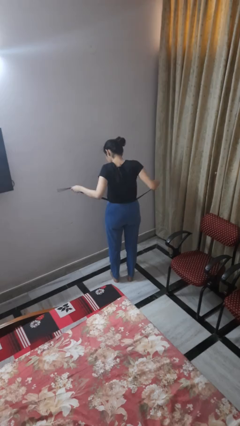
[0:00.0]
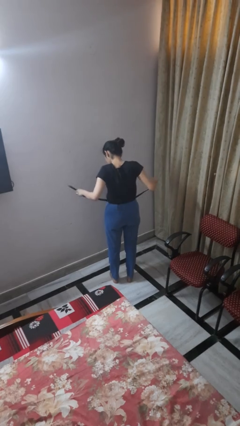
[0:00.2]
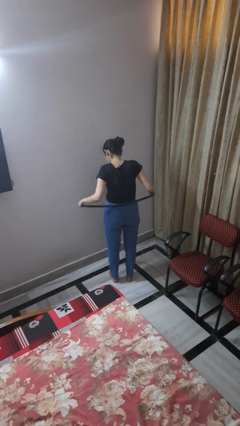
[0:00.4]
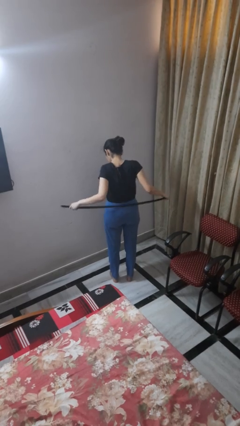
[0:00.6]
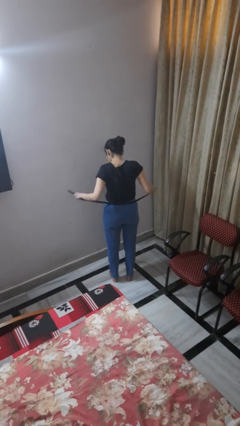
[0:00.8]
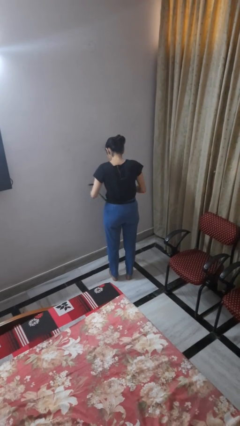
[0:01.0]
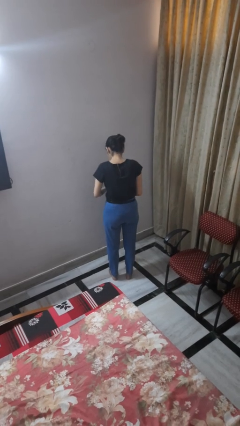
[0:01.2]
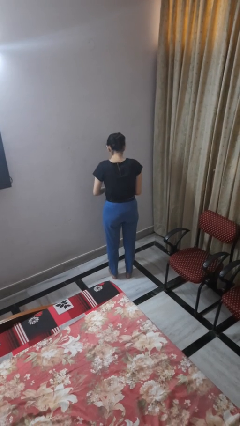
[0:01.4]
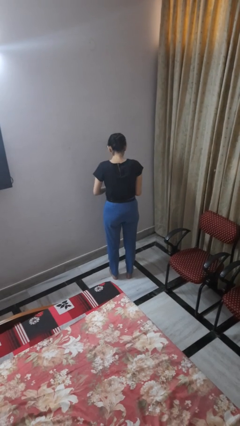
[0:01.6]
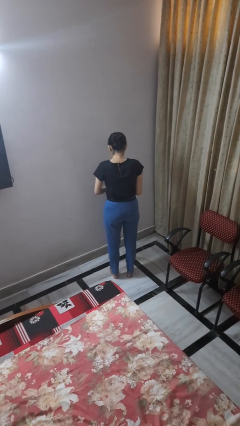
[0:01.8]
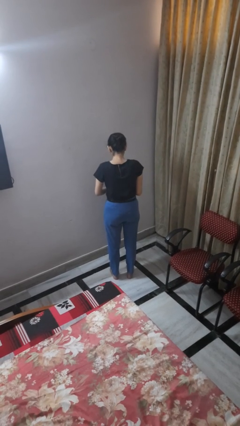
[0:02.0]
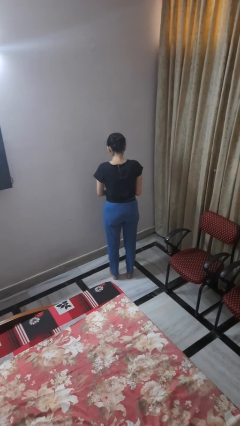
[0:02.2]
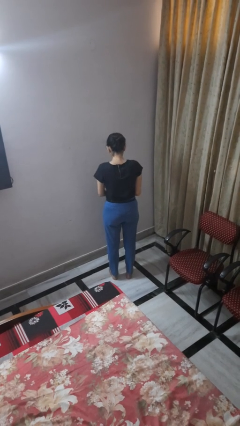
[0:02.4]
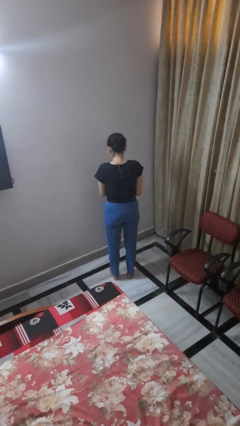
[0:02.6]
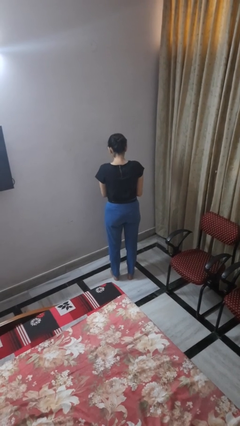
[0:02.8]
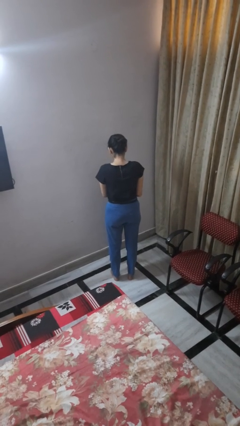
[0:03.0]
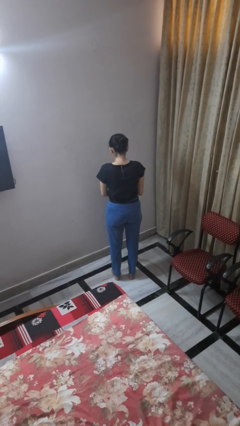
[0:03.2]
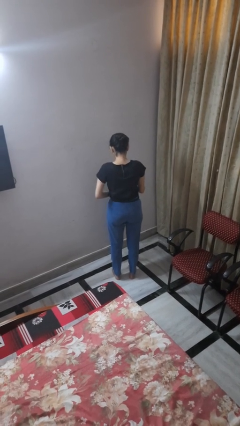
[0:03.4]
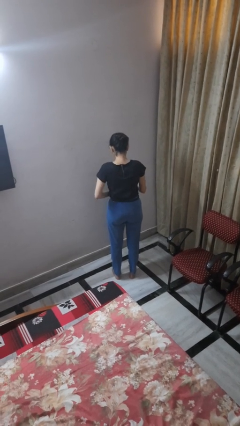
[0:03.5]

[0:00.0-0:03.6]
person puts on belt

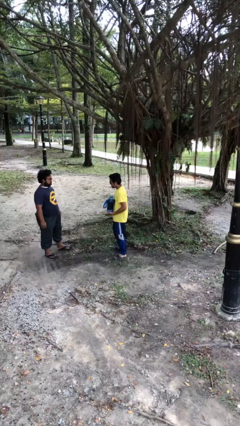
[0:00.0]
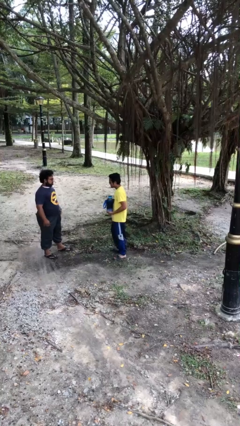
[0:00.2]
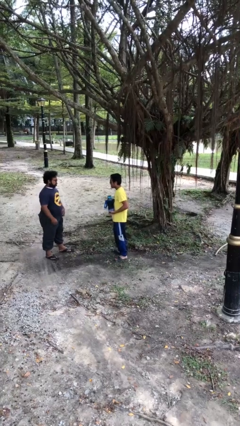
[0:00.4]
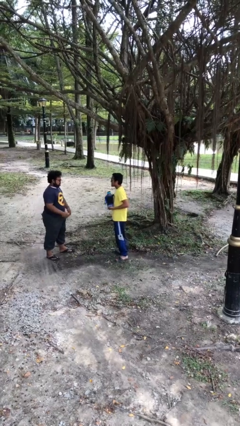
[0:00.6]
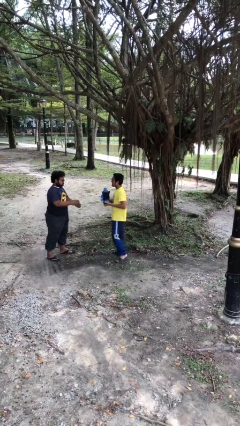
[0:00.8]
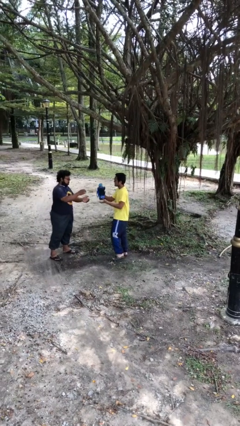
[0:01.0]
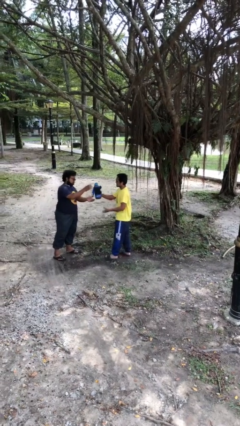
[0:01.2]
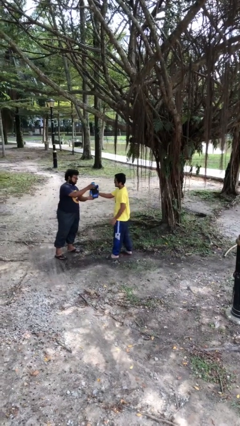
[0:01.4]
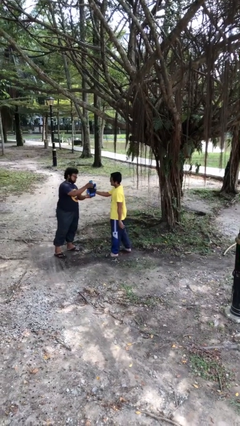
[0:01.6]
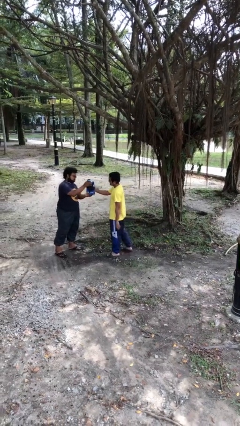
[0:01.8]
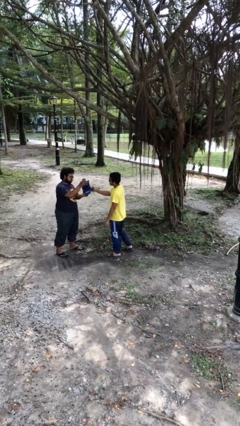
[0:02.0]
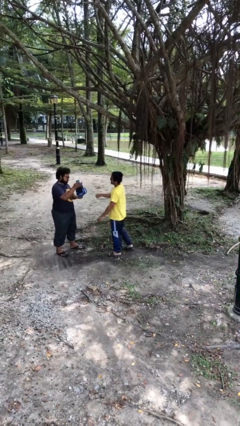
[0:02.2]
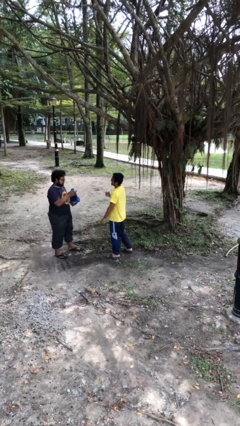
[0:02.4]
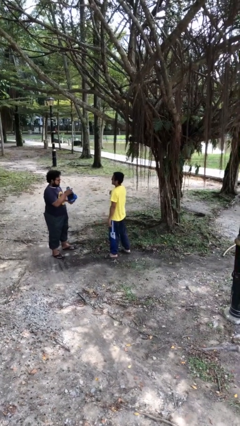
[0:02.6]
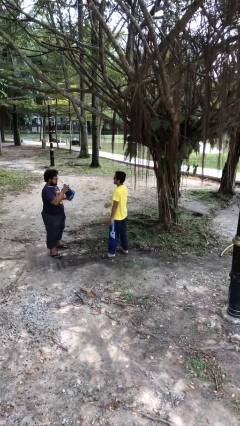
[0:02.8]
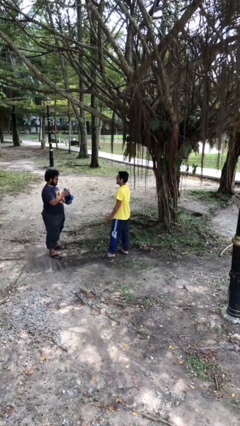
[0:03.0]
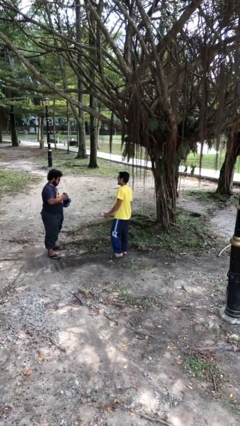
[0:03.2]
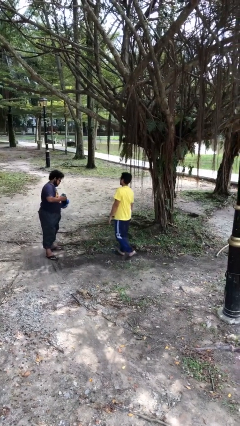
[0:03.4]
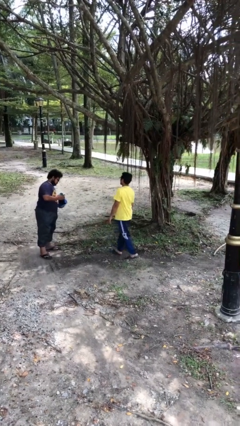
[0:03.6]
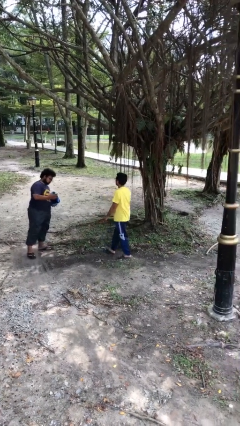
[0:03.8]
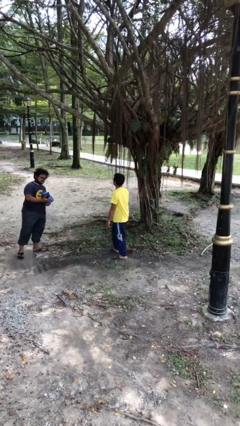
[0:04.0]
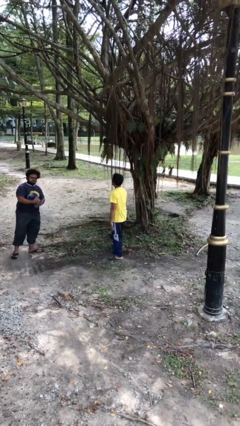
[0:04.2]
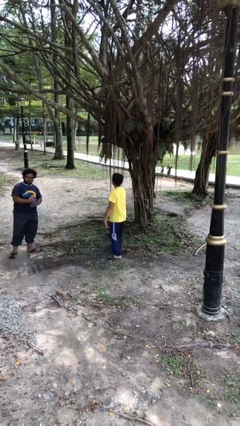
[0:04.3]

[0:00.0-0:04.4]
person transfers object to person

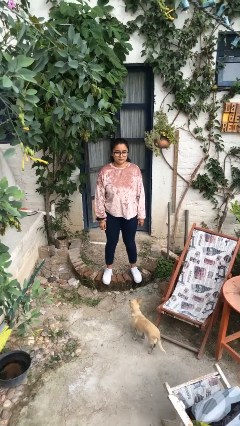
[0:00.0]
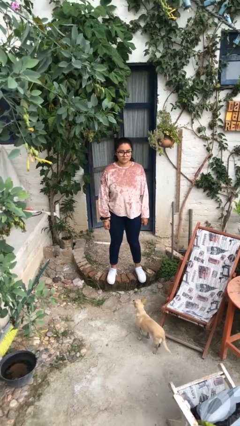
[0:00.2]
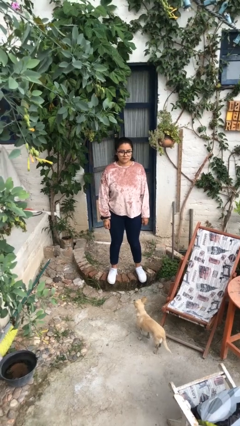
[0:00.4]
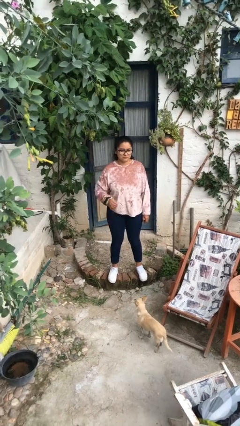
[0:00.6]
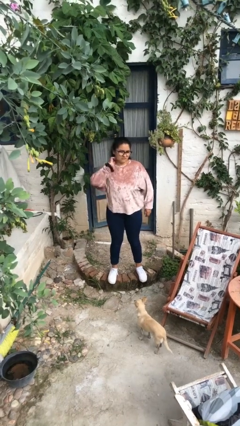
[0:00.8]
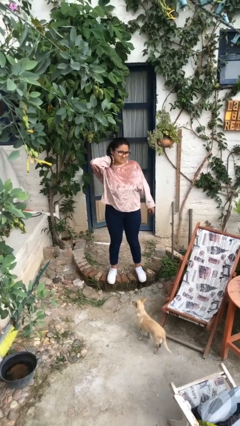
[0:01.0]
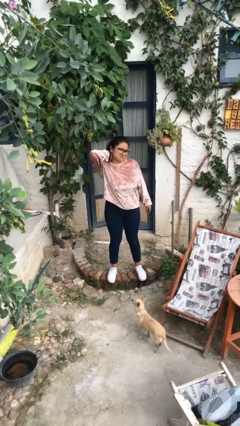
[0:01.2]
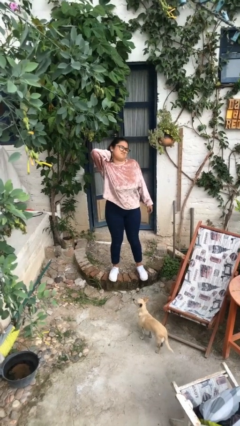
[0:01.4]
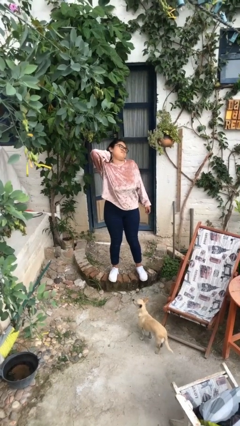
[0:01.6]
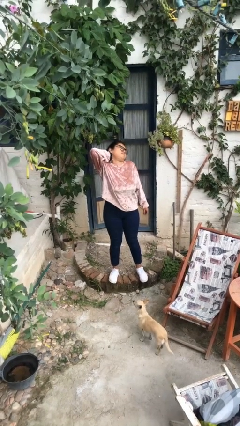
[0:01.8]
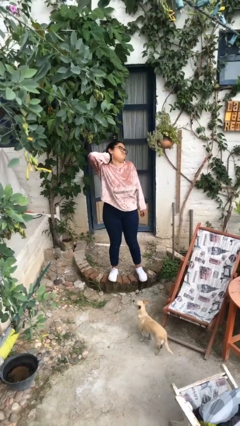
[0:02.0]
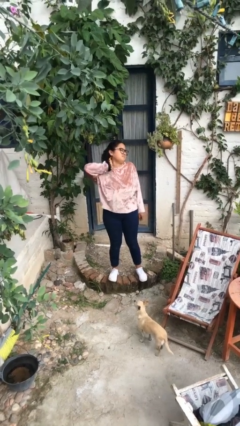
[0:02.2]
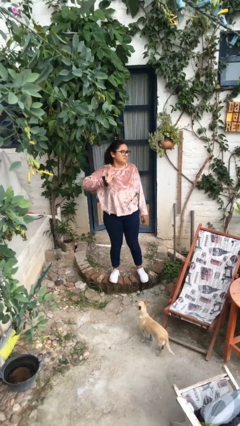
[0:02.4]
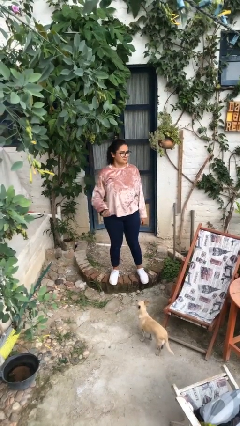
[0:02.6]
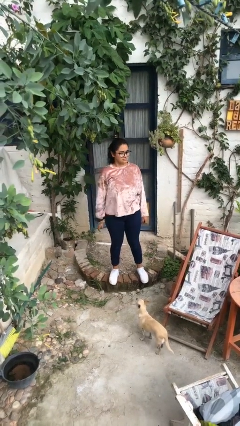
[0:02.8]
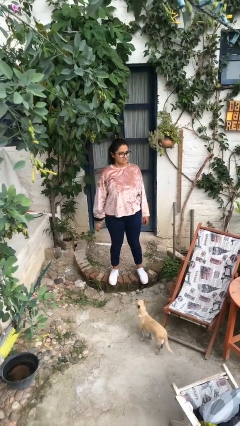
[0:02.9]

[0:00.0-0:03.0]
person rubs neck

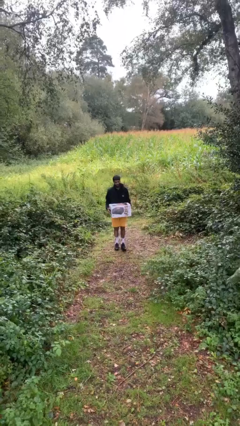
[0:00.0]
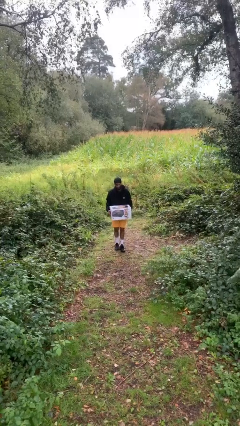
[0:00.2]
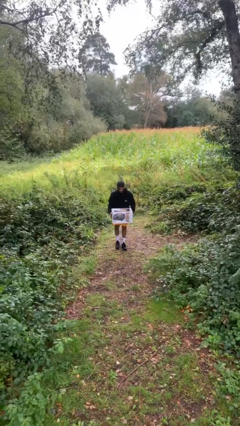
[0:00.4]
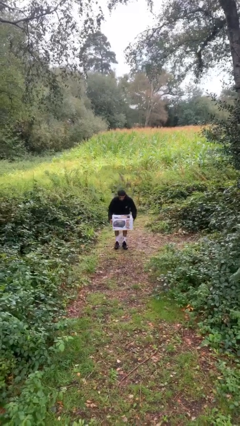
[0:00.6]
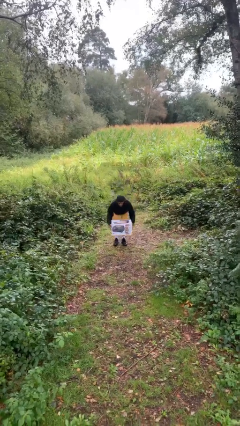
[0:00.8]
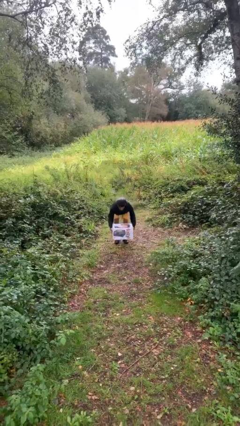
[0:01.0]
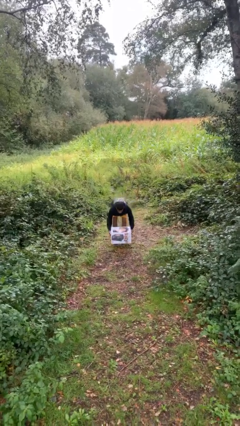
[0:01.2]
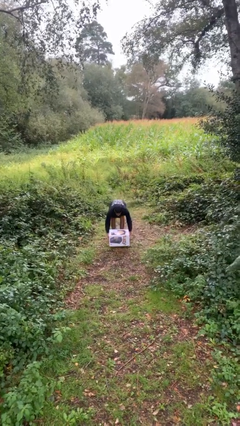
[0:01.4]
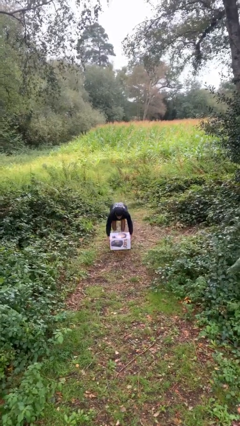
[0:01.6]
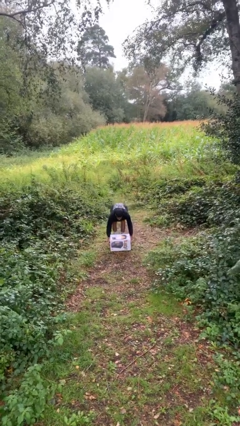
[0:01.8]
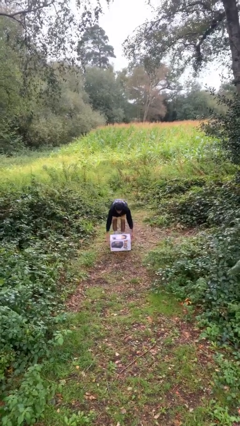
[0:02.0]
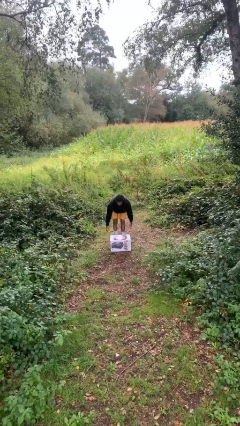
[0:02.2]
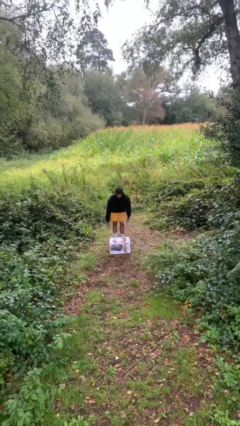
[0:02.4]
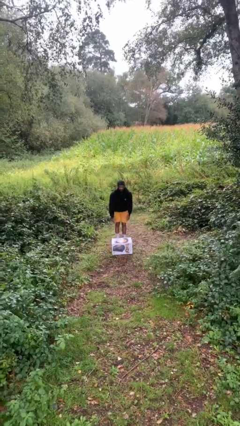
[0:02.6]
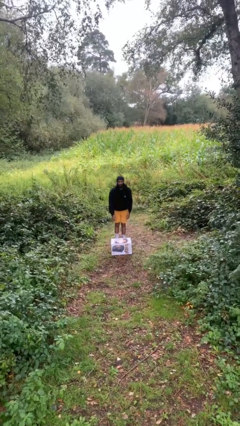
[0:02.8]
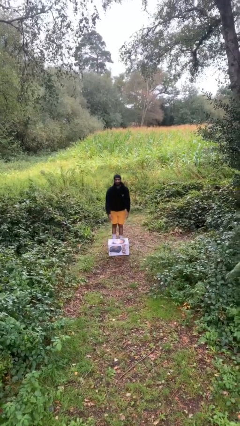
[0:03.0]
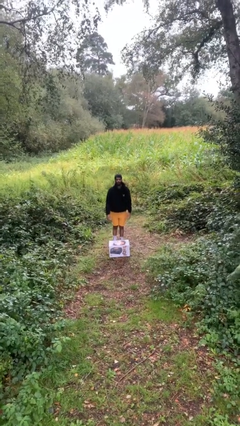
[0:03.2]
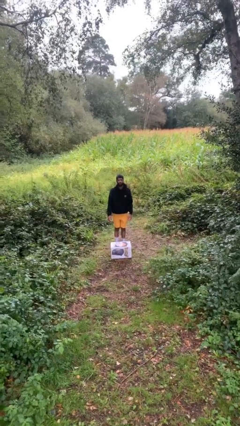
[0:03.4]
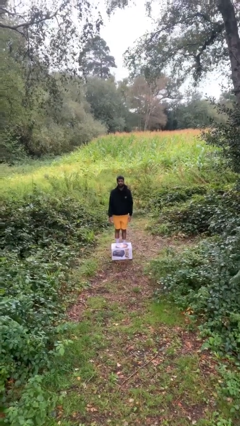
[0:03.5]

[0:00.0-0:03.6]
person puts down object on floor

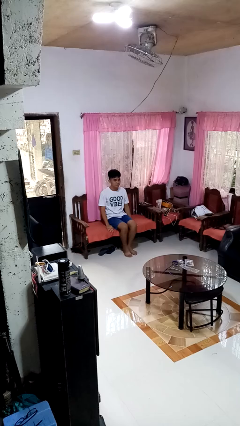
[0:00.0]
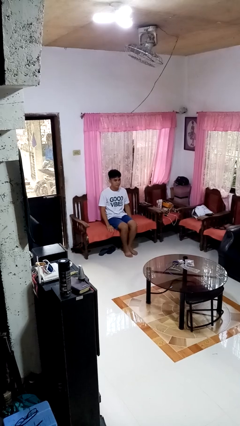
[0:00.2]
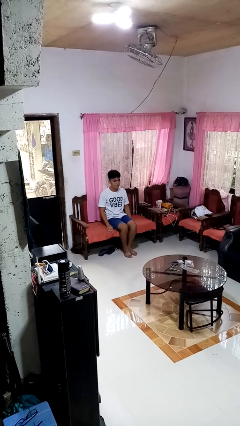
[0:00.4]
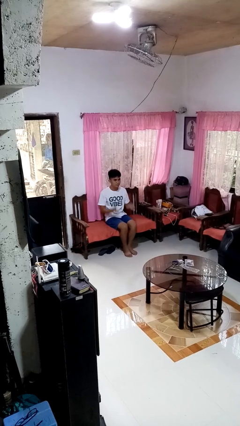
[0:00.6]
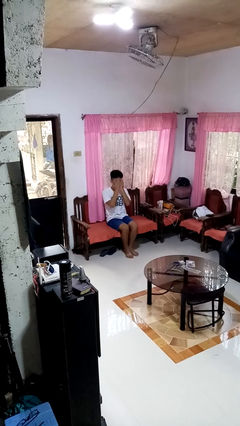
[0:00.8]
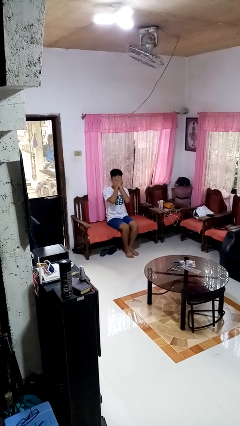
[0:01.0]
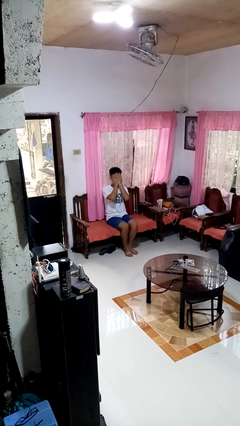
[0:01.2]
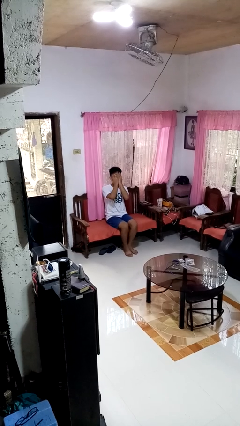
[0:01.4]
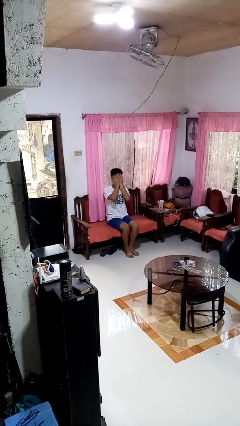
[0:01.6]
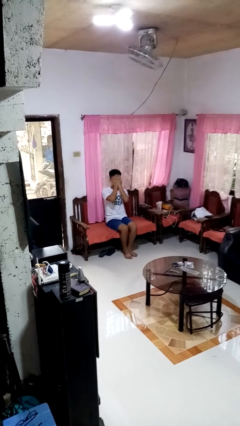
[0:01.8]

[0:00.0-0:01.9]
person covers face with hands

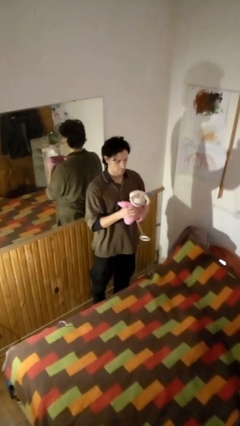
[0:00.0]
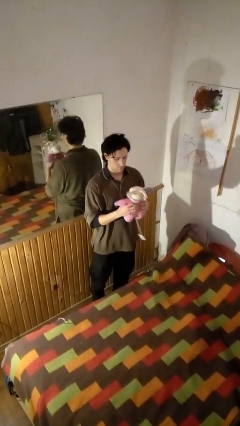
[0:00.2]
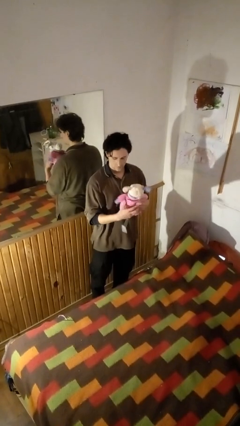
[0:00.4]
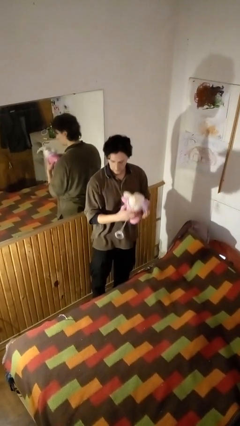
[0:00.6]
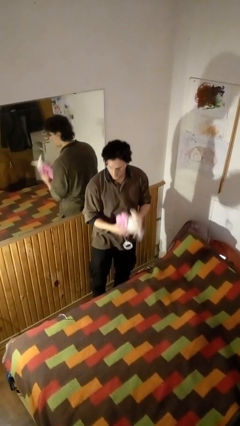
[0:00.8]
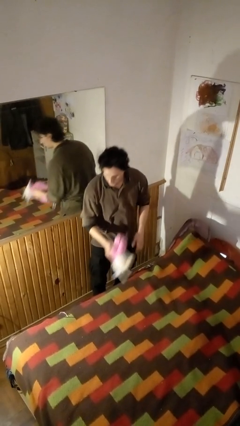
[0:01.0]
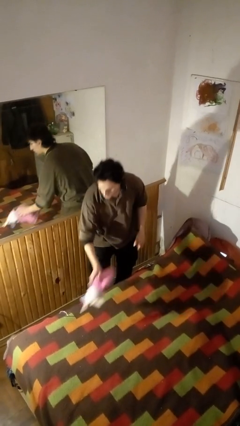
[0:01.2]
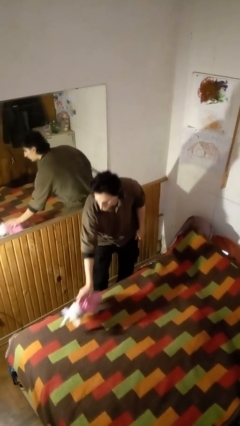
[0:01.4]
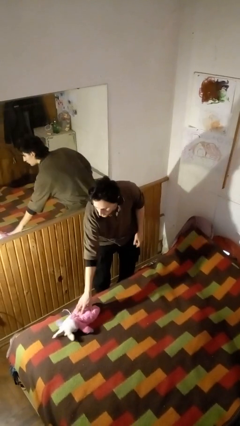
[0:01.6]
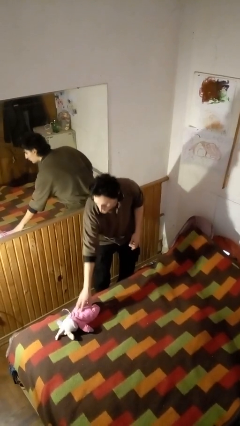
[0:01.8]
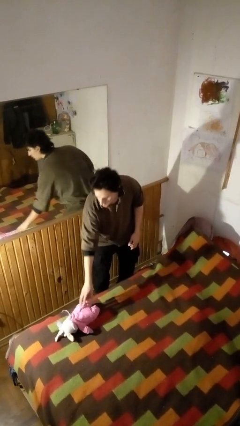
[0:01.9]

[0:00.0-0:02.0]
person puts down object on bed
